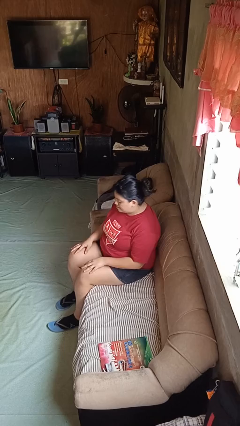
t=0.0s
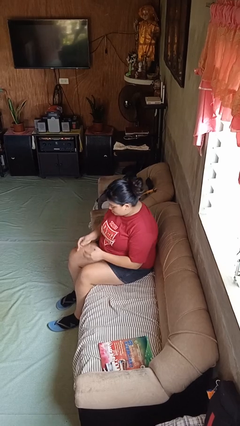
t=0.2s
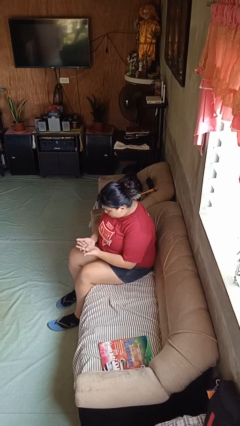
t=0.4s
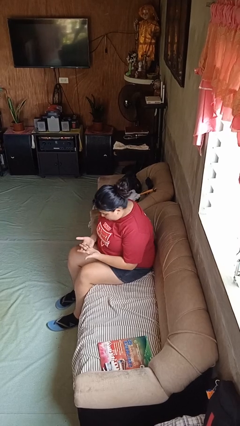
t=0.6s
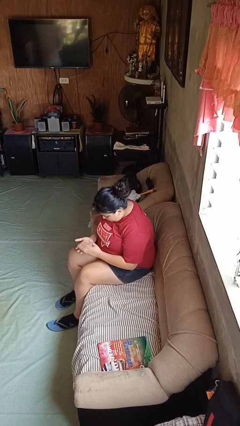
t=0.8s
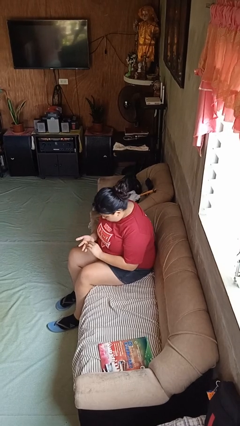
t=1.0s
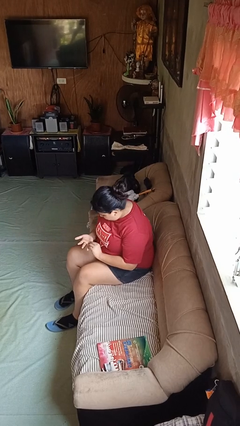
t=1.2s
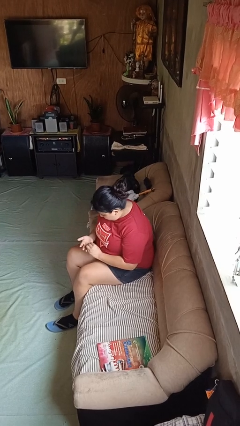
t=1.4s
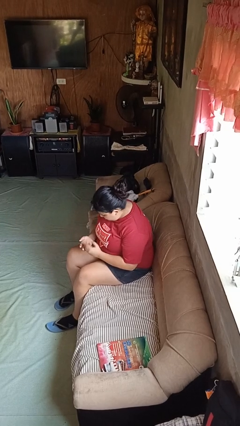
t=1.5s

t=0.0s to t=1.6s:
person looks at hands in lap

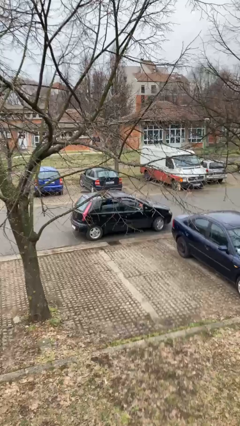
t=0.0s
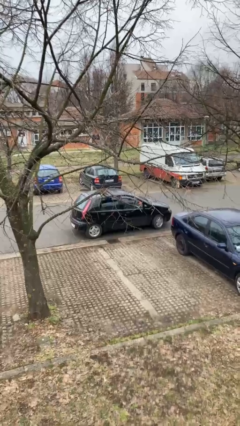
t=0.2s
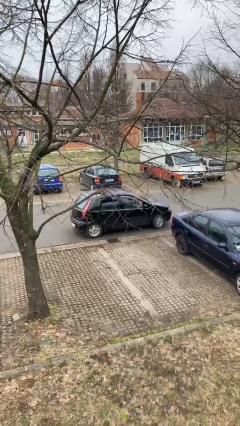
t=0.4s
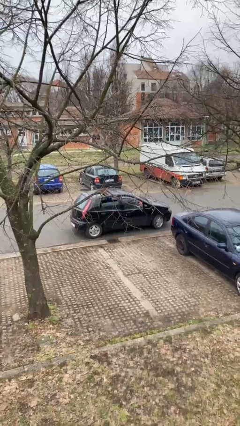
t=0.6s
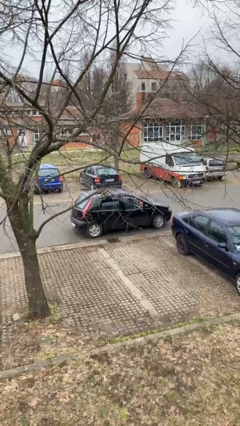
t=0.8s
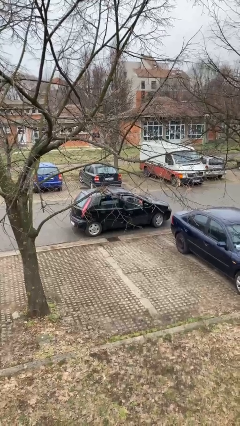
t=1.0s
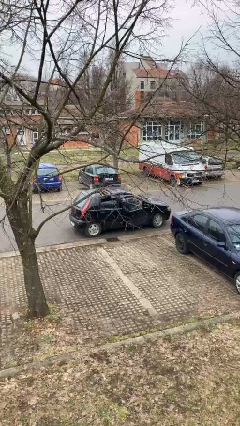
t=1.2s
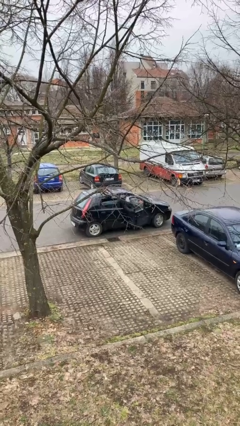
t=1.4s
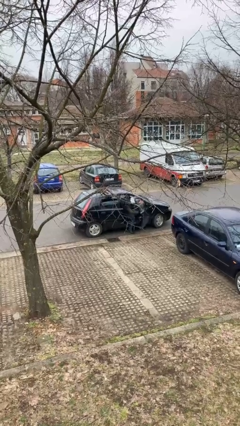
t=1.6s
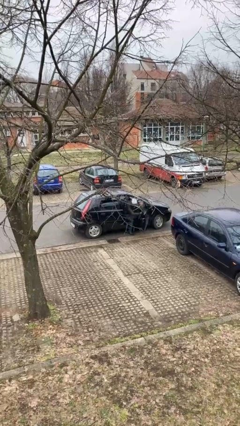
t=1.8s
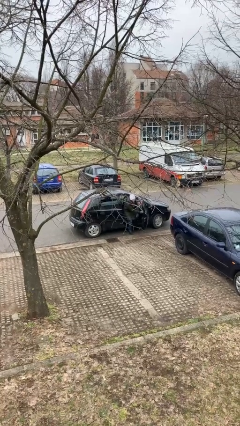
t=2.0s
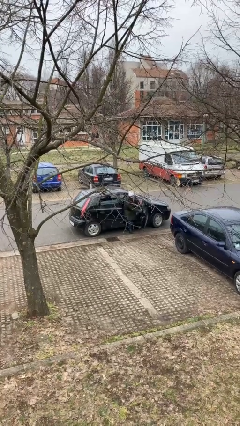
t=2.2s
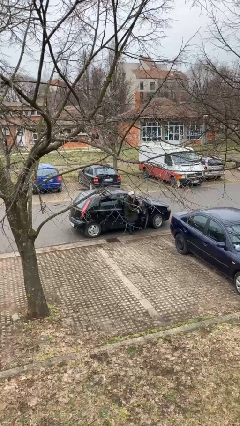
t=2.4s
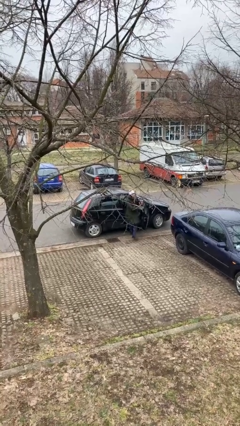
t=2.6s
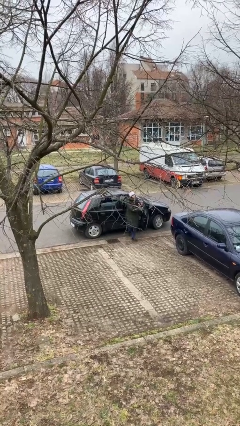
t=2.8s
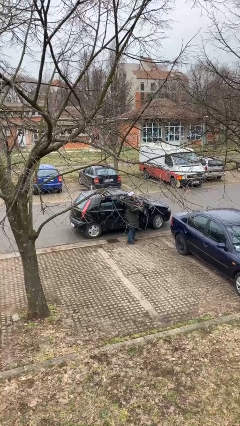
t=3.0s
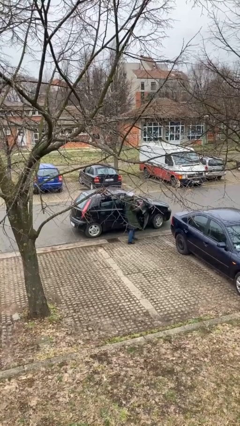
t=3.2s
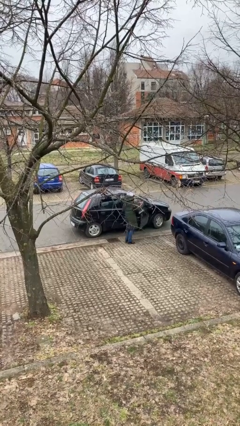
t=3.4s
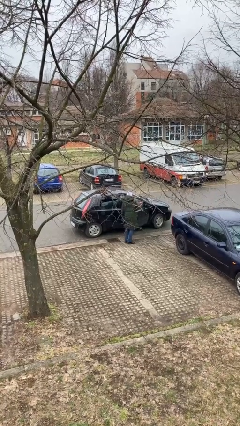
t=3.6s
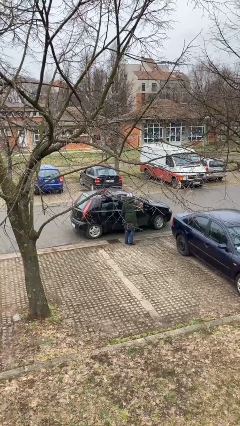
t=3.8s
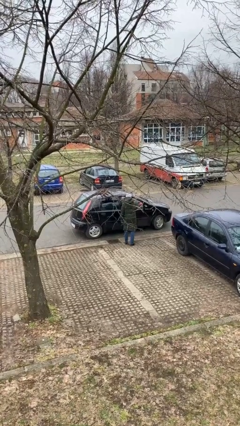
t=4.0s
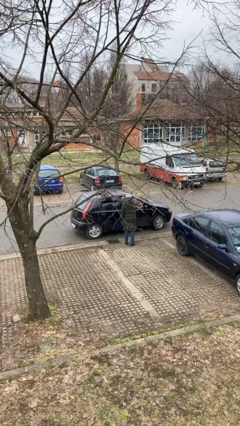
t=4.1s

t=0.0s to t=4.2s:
car drops off person

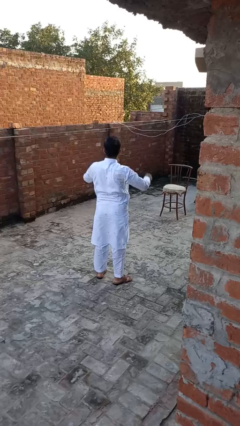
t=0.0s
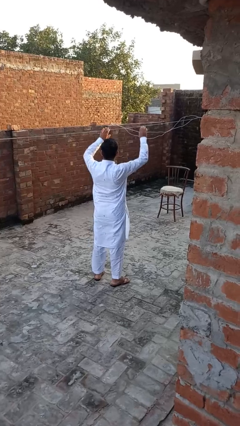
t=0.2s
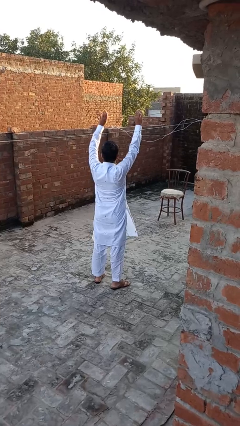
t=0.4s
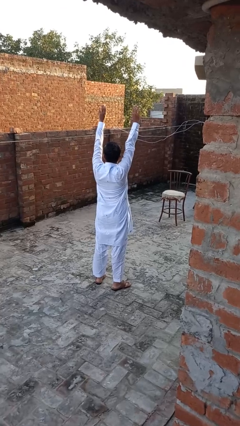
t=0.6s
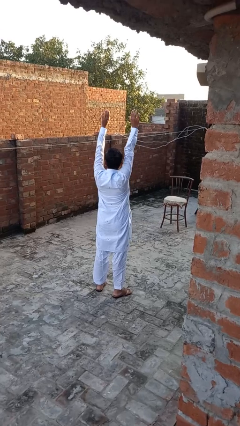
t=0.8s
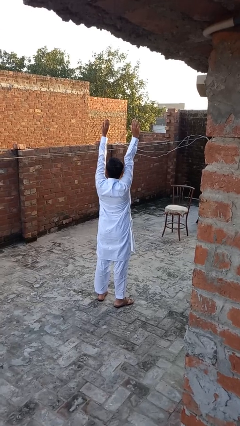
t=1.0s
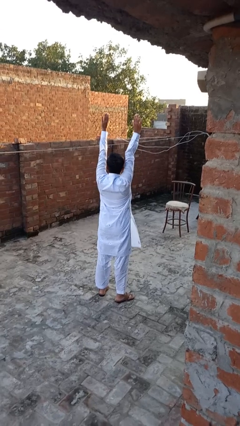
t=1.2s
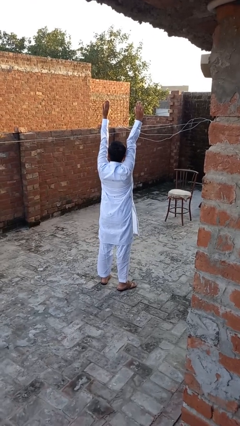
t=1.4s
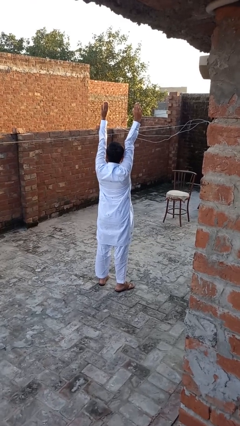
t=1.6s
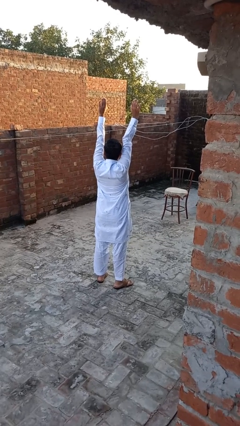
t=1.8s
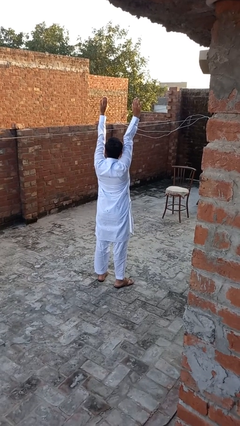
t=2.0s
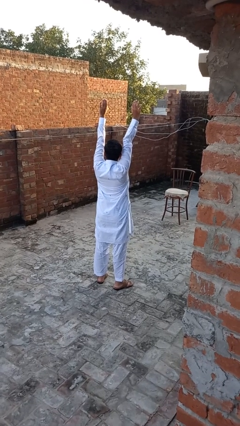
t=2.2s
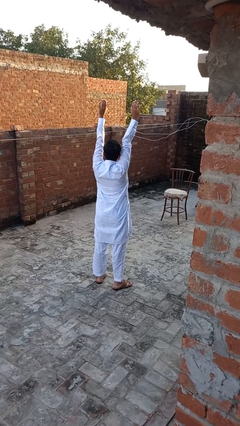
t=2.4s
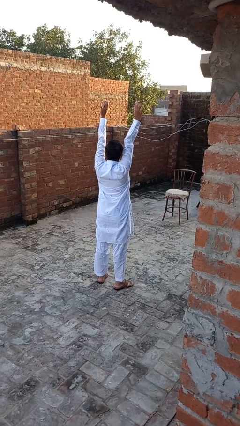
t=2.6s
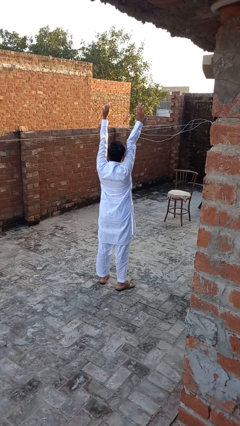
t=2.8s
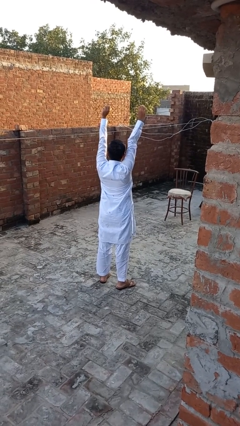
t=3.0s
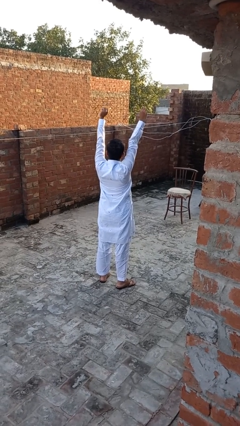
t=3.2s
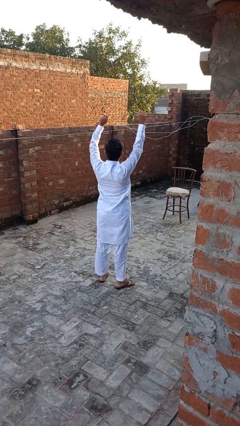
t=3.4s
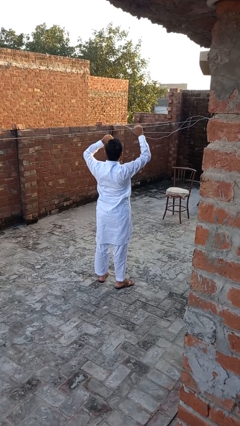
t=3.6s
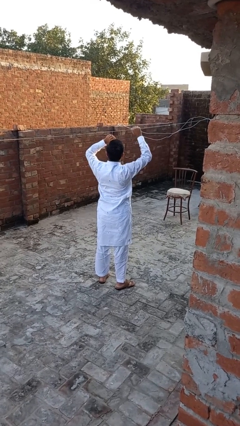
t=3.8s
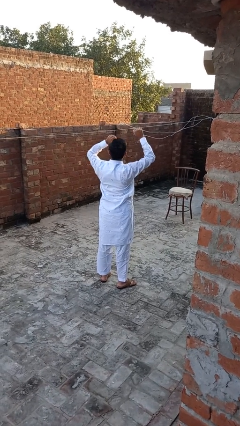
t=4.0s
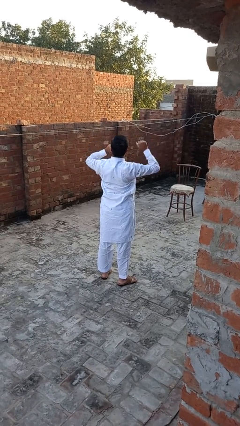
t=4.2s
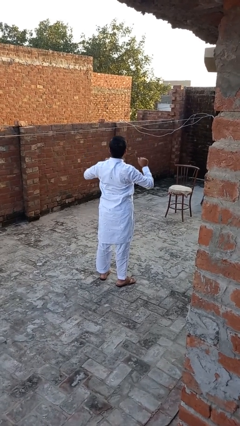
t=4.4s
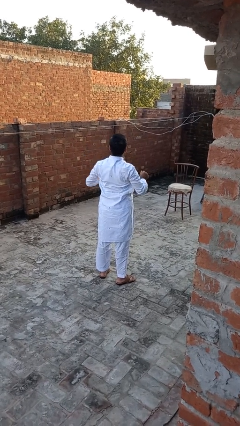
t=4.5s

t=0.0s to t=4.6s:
person gestures swipe up

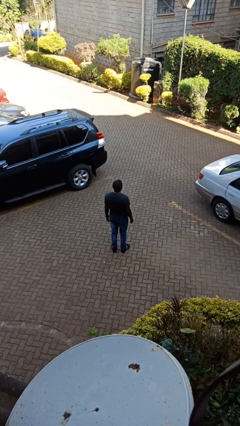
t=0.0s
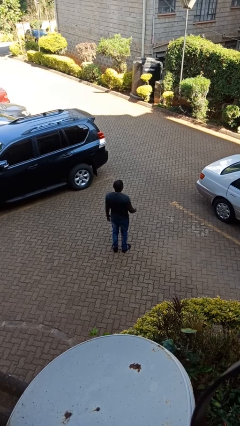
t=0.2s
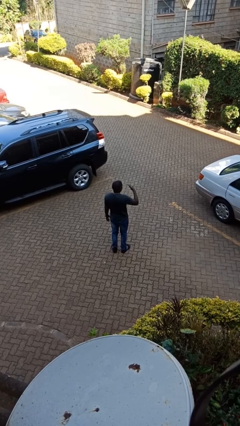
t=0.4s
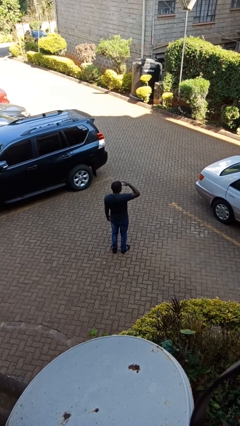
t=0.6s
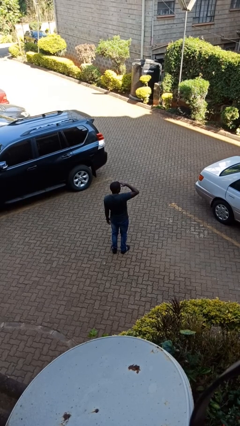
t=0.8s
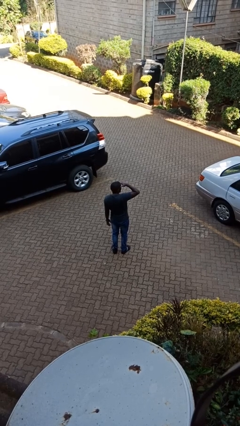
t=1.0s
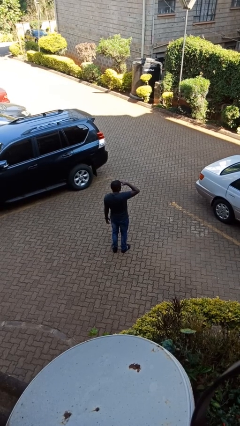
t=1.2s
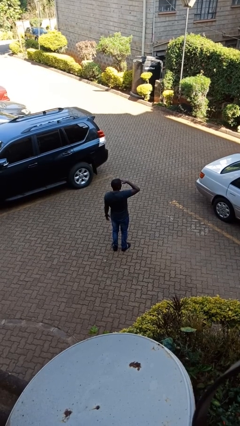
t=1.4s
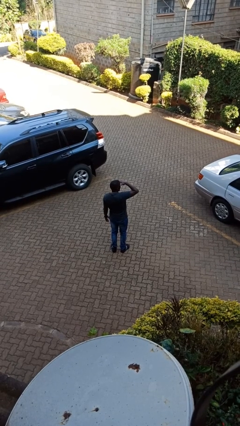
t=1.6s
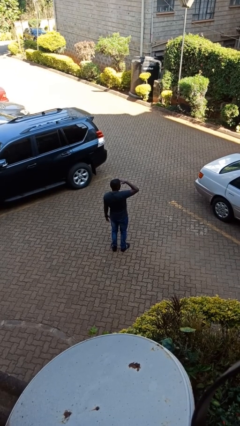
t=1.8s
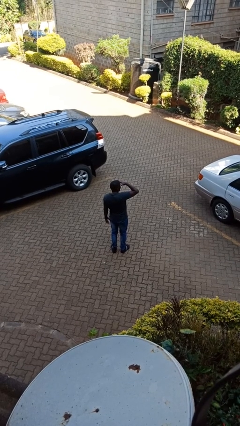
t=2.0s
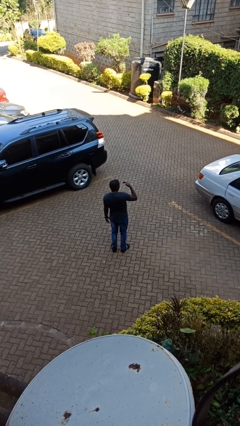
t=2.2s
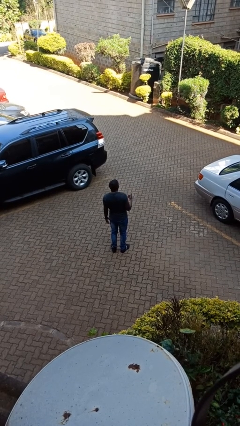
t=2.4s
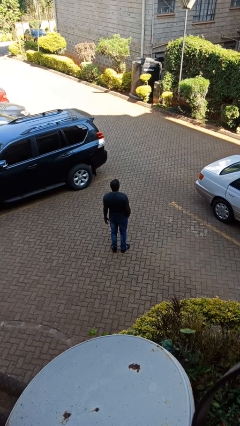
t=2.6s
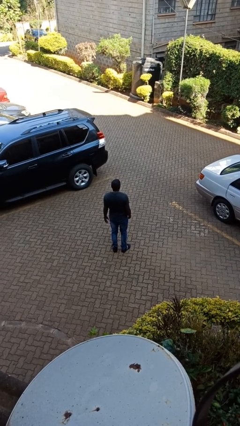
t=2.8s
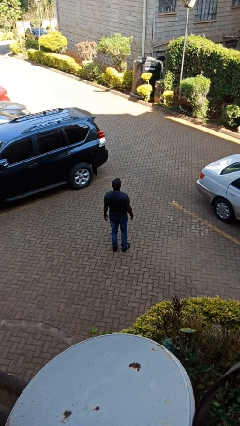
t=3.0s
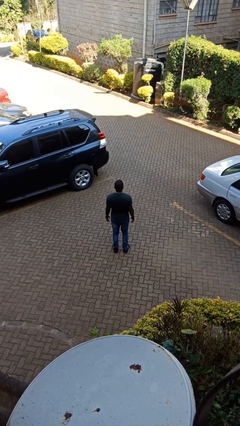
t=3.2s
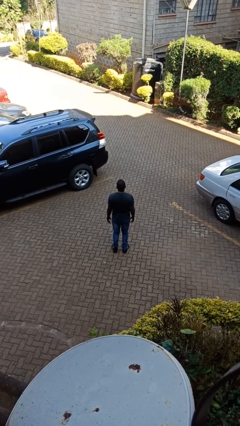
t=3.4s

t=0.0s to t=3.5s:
person shades eyes

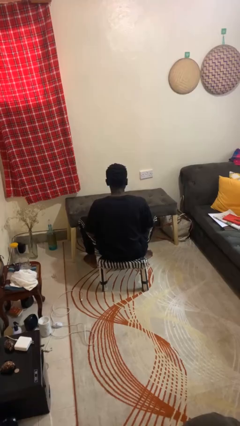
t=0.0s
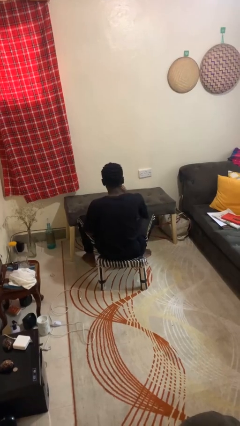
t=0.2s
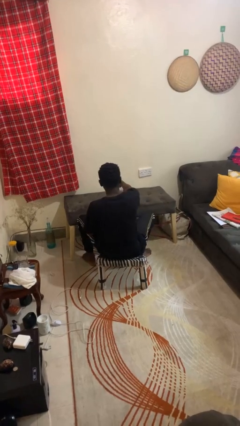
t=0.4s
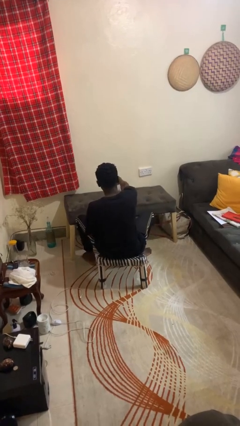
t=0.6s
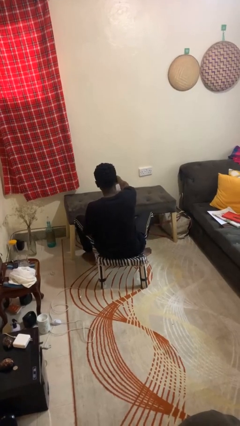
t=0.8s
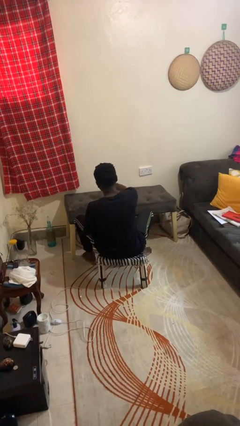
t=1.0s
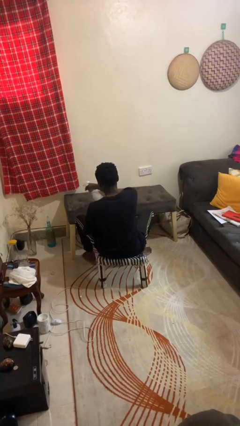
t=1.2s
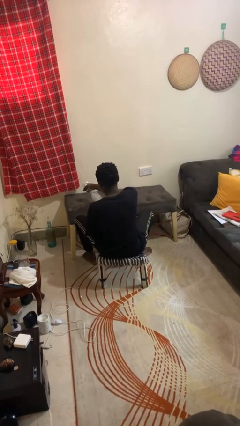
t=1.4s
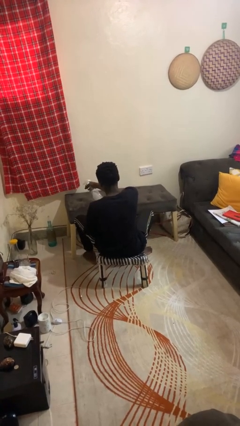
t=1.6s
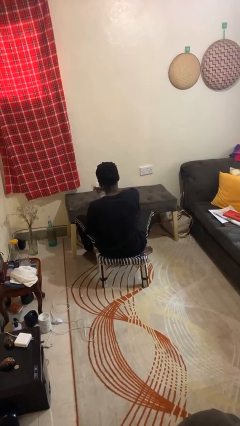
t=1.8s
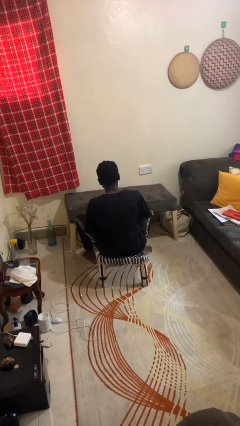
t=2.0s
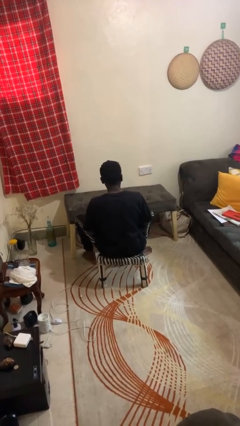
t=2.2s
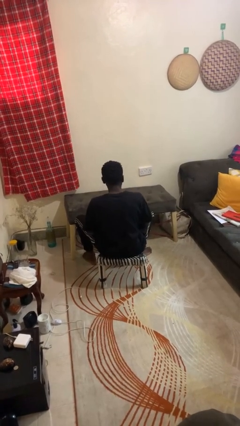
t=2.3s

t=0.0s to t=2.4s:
person sprays from bottle

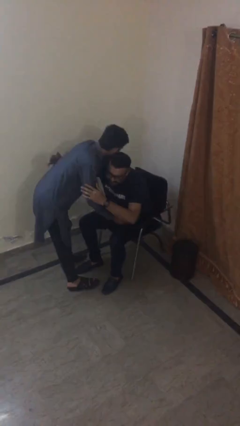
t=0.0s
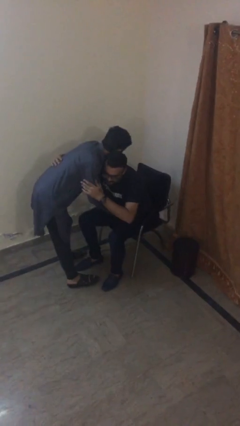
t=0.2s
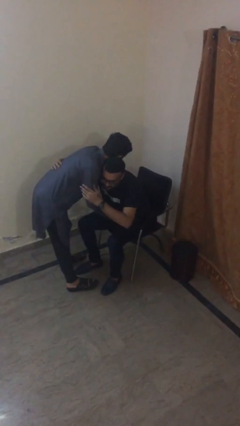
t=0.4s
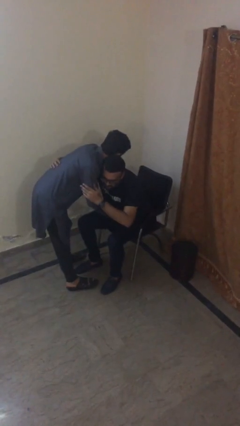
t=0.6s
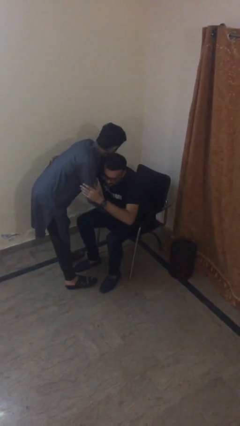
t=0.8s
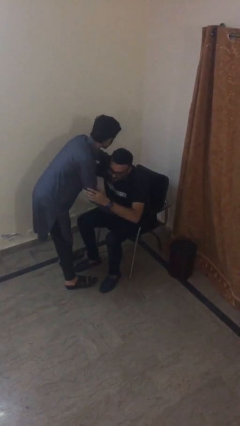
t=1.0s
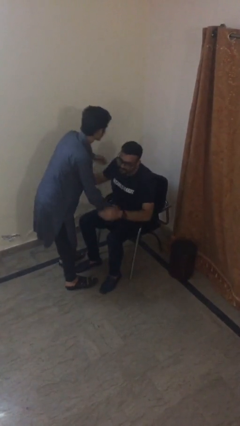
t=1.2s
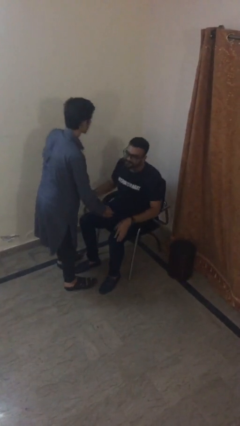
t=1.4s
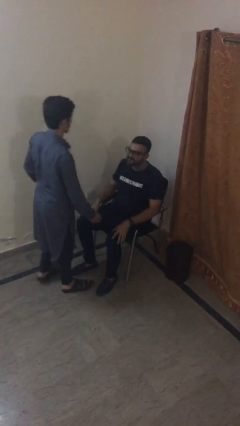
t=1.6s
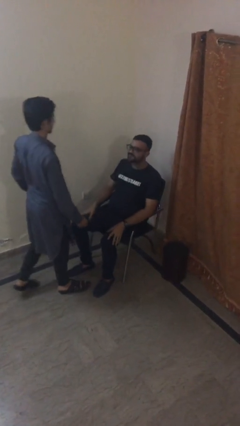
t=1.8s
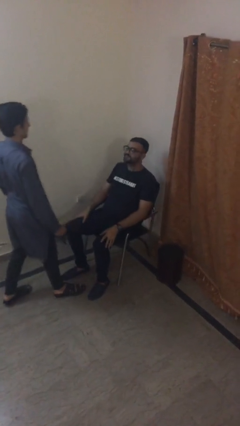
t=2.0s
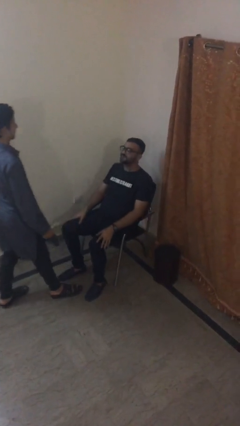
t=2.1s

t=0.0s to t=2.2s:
person embraces person
